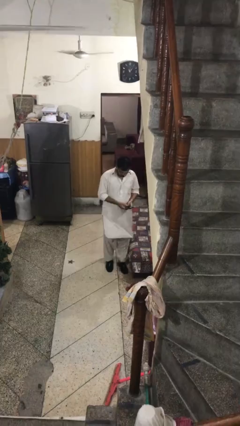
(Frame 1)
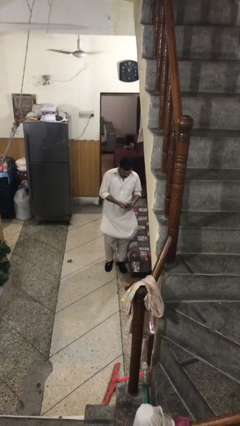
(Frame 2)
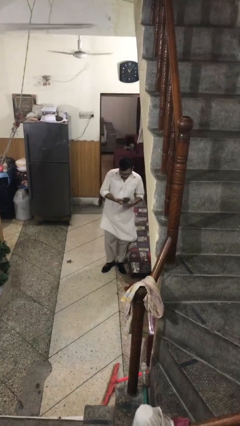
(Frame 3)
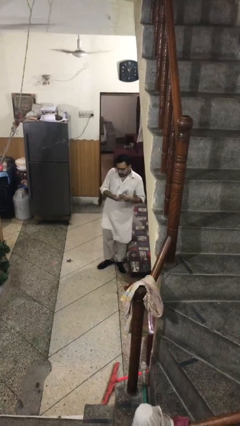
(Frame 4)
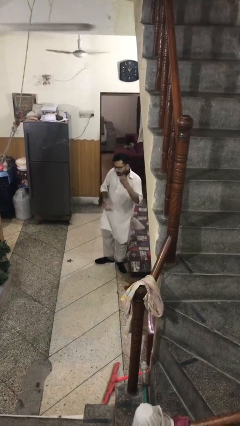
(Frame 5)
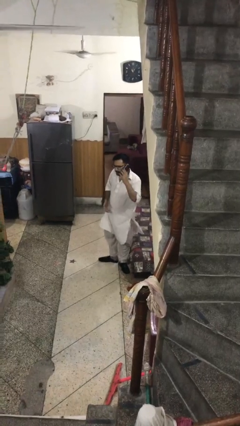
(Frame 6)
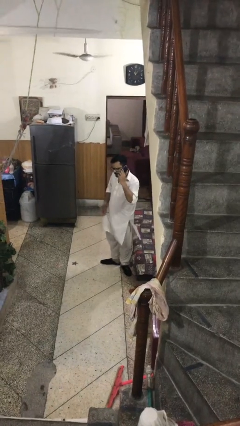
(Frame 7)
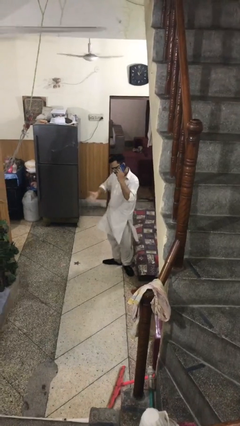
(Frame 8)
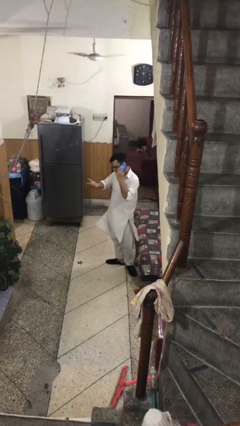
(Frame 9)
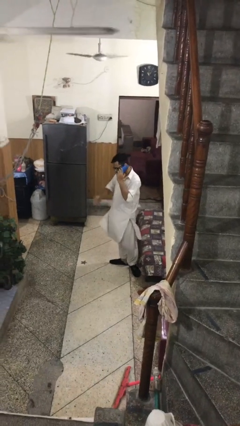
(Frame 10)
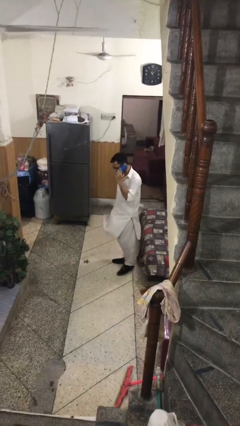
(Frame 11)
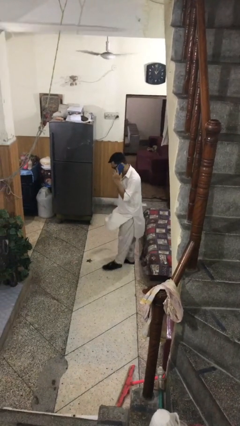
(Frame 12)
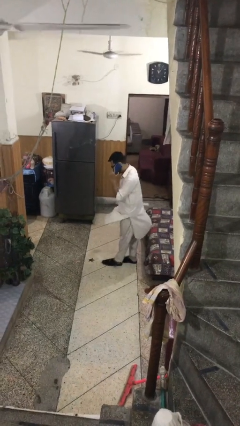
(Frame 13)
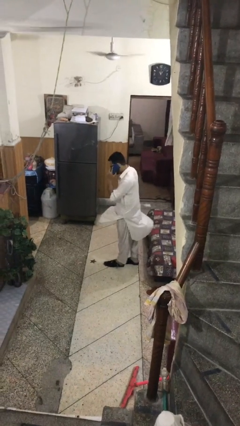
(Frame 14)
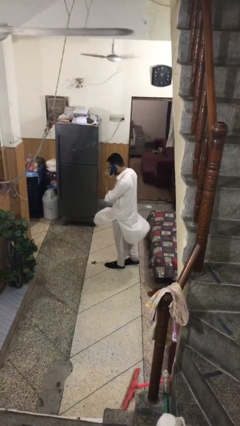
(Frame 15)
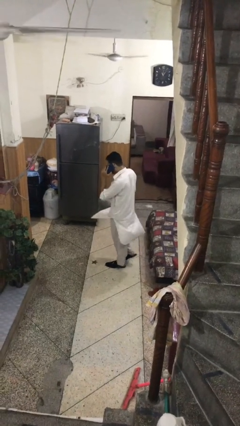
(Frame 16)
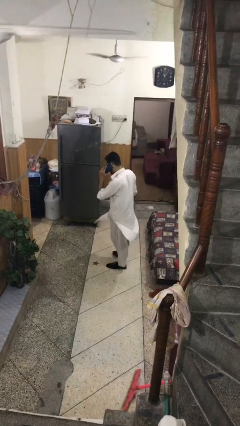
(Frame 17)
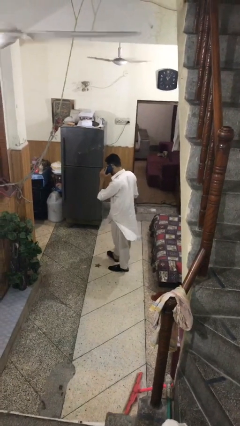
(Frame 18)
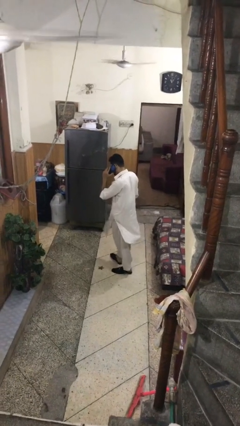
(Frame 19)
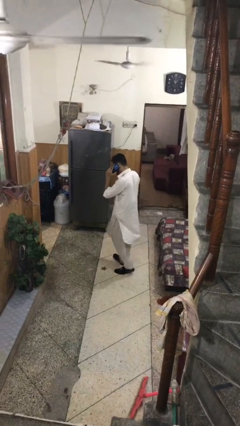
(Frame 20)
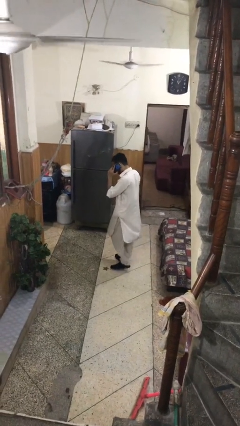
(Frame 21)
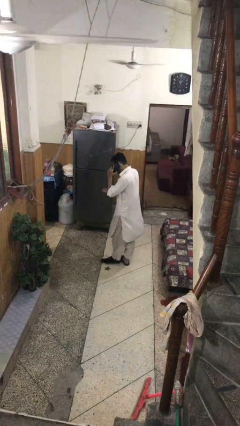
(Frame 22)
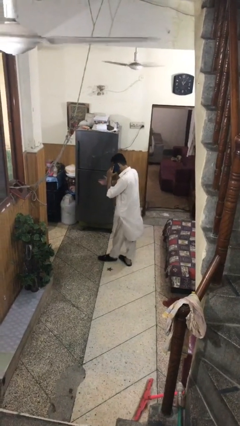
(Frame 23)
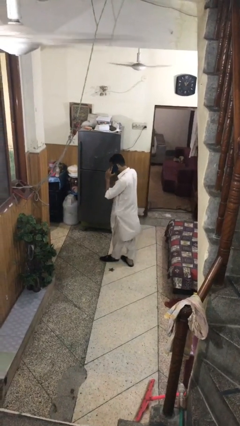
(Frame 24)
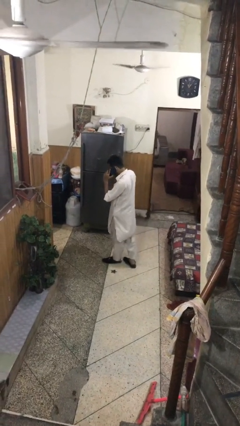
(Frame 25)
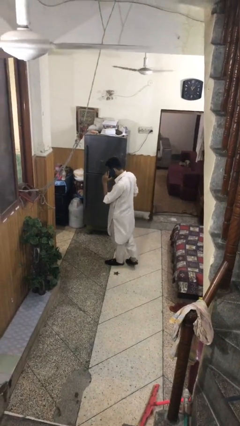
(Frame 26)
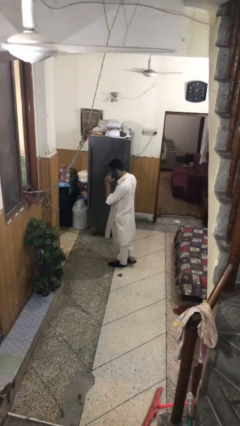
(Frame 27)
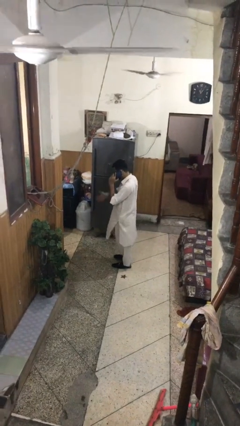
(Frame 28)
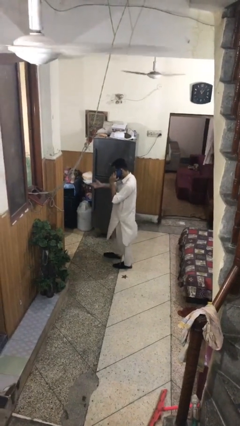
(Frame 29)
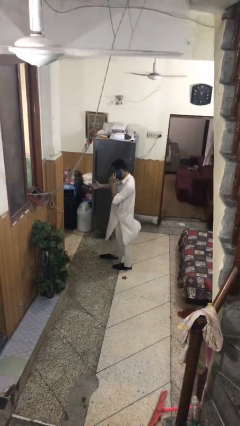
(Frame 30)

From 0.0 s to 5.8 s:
person talks on phone

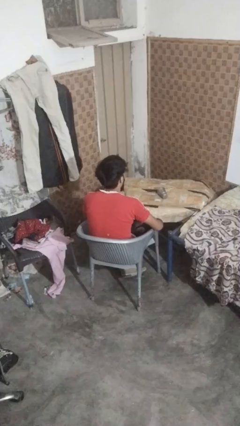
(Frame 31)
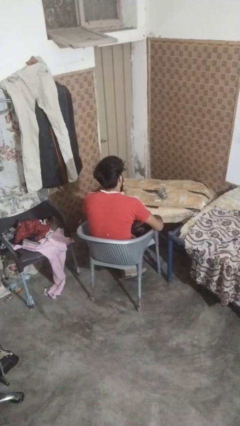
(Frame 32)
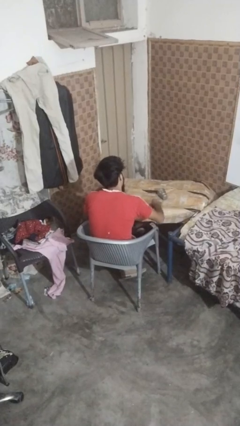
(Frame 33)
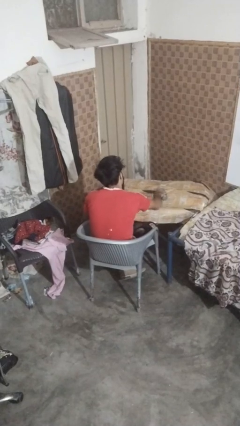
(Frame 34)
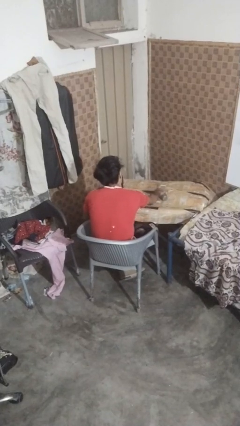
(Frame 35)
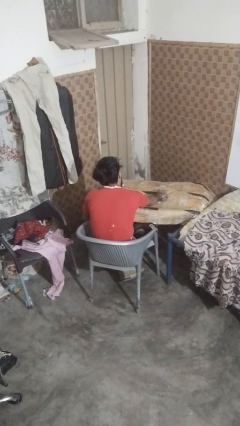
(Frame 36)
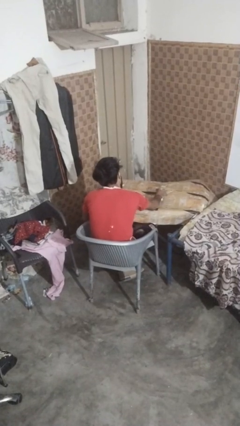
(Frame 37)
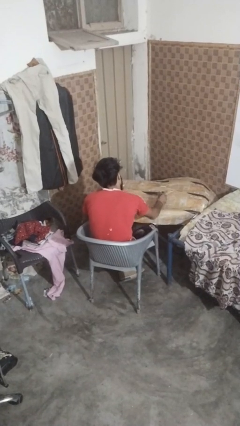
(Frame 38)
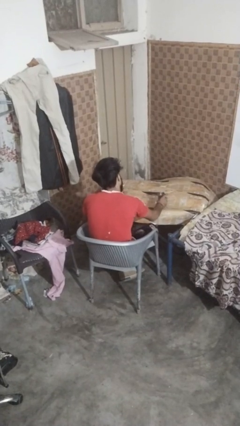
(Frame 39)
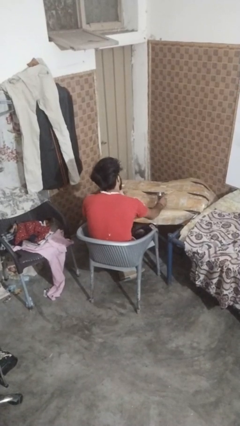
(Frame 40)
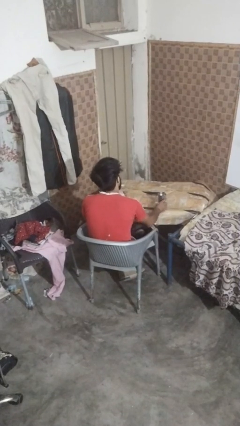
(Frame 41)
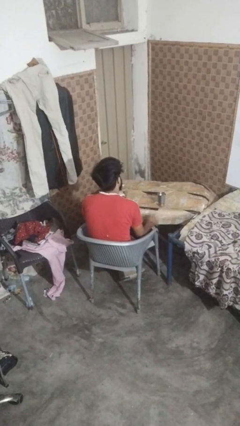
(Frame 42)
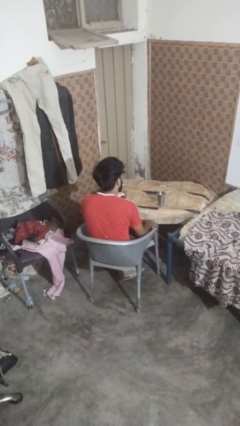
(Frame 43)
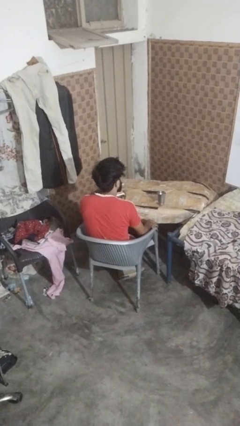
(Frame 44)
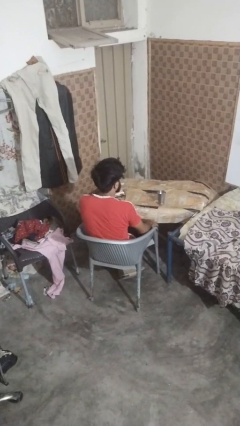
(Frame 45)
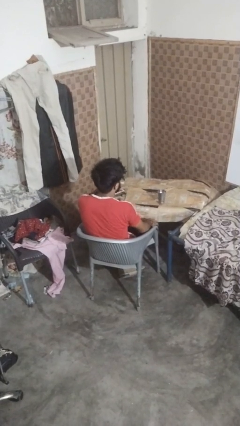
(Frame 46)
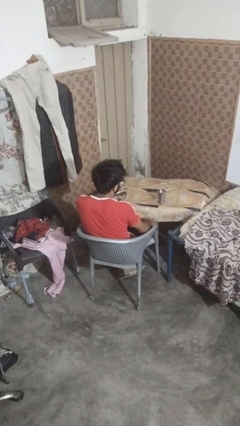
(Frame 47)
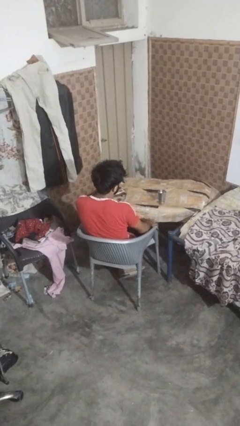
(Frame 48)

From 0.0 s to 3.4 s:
person sets upright glass

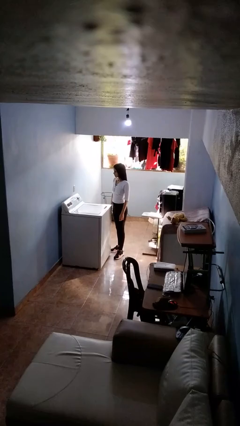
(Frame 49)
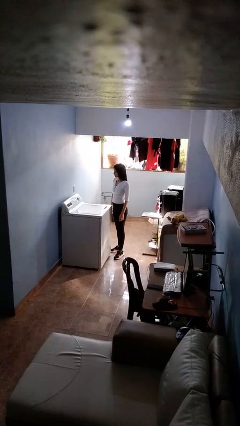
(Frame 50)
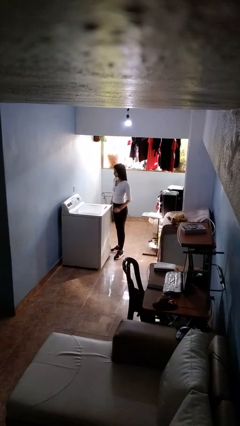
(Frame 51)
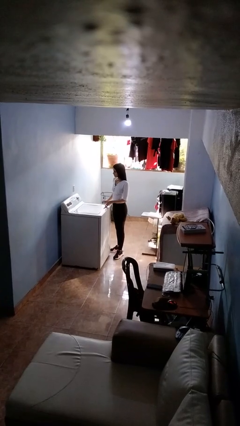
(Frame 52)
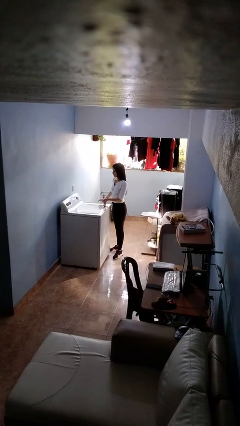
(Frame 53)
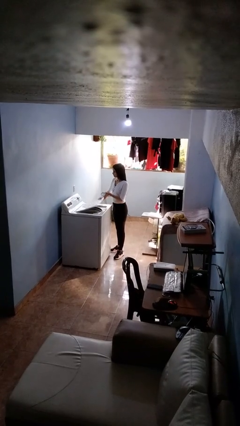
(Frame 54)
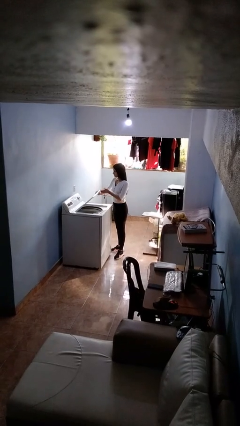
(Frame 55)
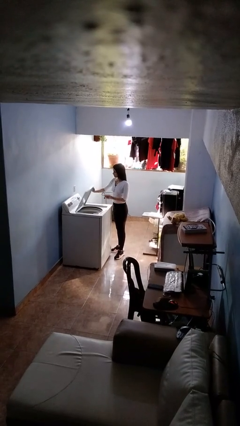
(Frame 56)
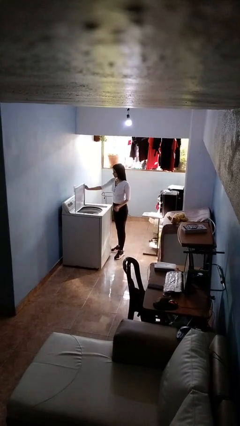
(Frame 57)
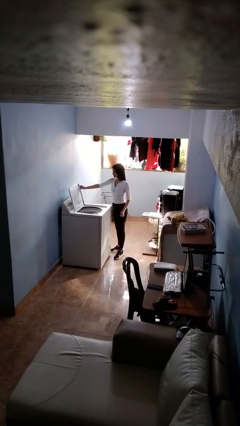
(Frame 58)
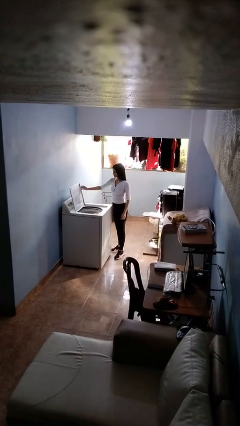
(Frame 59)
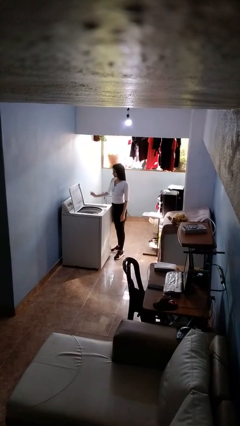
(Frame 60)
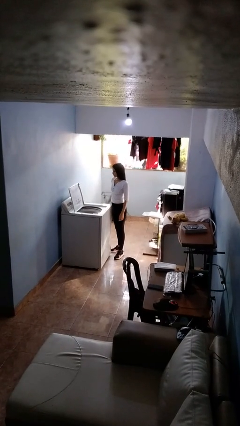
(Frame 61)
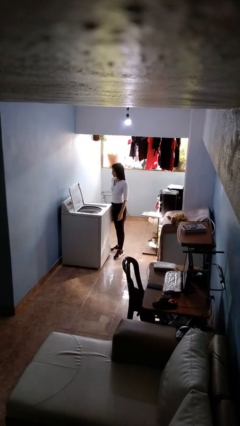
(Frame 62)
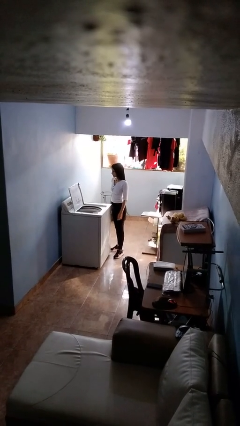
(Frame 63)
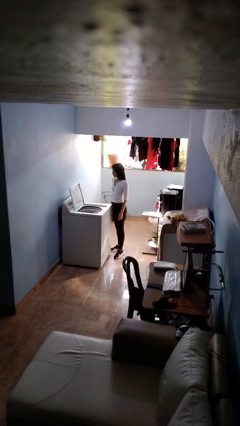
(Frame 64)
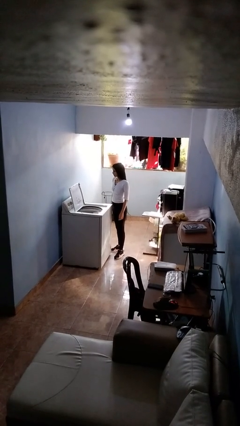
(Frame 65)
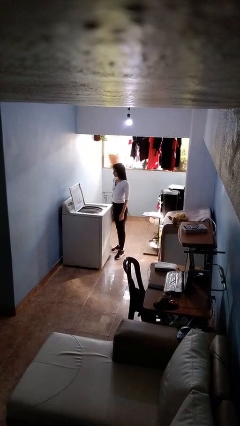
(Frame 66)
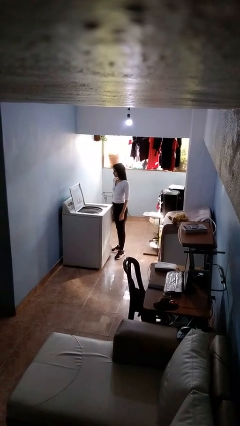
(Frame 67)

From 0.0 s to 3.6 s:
person opens clothes washer

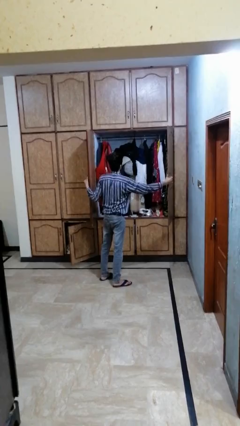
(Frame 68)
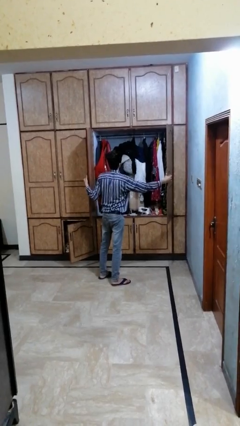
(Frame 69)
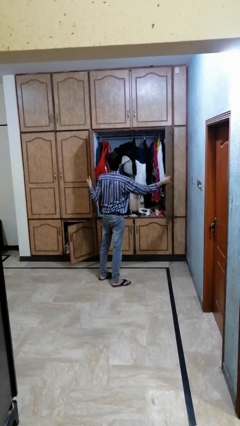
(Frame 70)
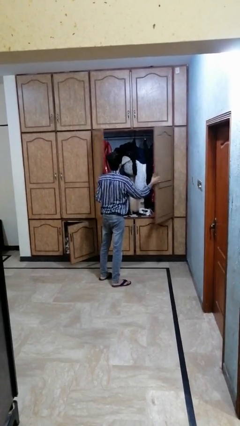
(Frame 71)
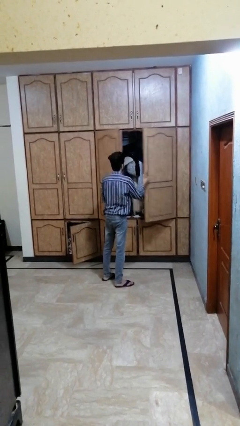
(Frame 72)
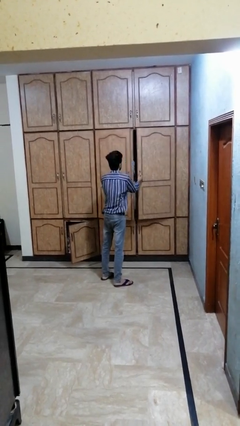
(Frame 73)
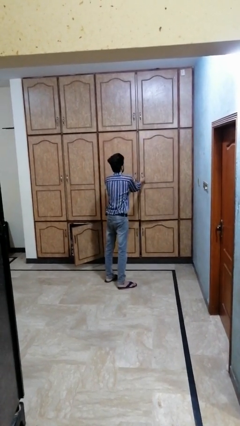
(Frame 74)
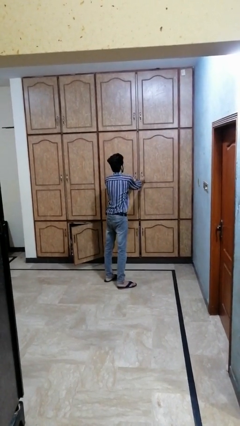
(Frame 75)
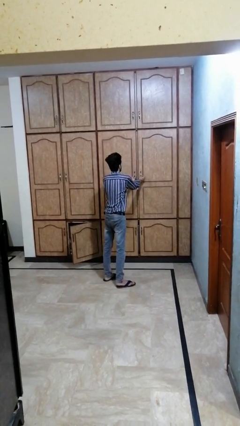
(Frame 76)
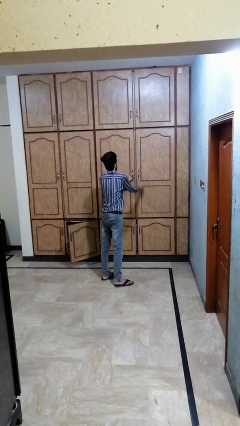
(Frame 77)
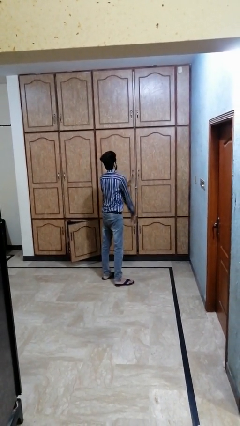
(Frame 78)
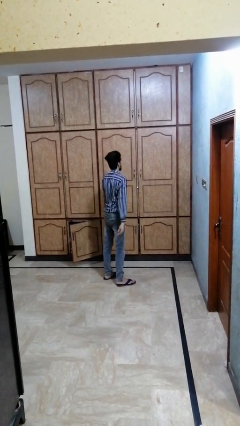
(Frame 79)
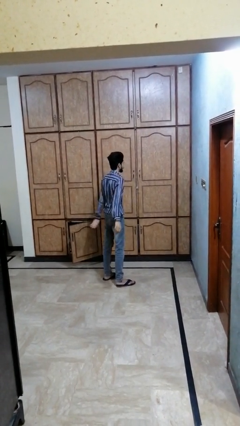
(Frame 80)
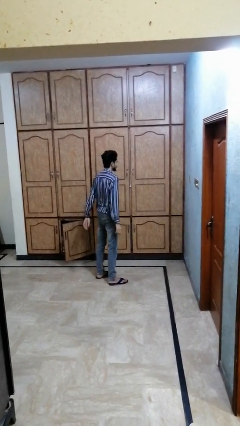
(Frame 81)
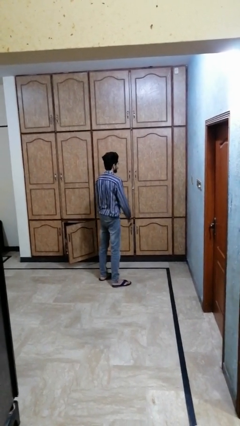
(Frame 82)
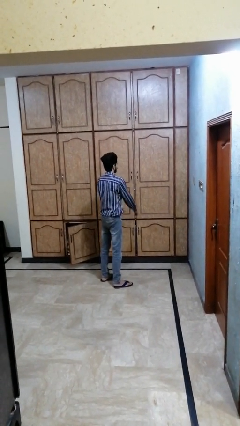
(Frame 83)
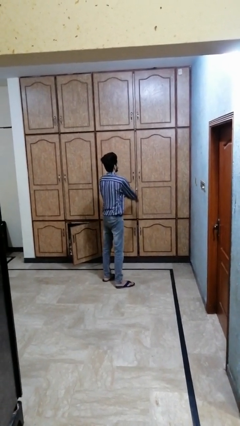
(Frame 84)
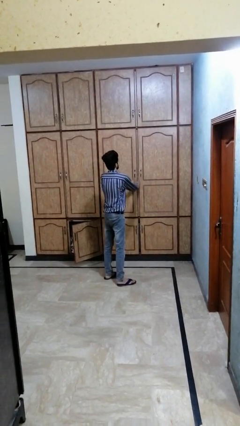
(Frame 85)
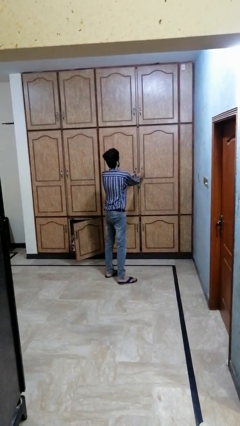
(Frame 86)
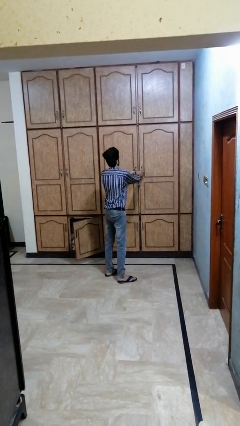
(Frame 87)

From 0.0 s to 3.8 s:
person closes dresser drawer

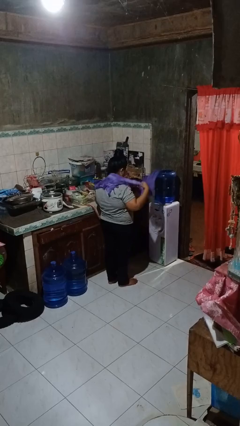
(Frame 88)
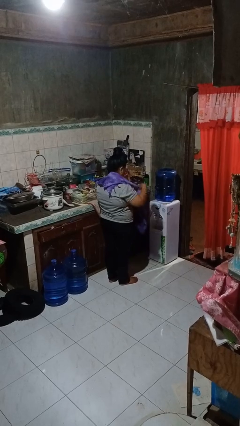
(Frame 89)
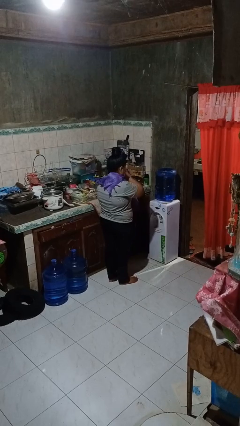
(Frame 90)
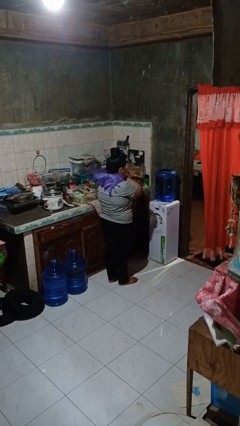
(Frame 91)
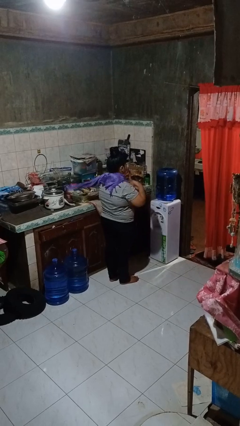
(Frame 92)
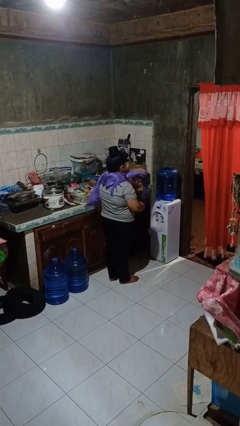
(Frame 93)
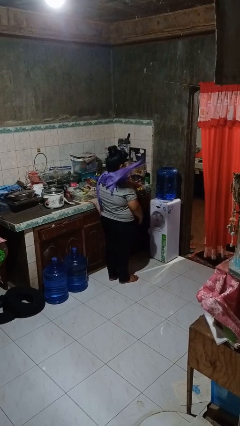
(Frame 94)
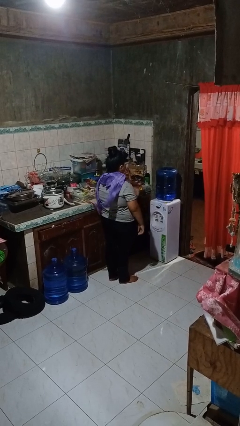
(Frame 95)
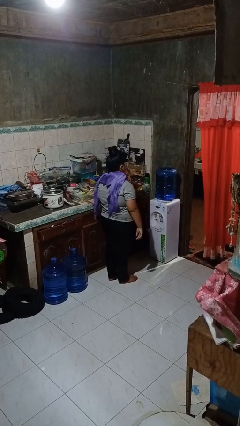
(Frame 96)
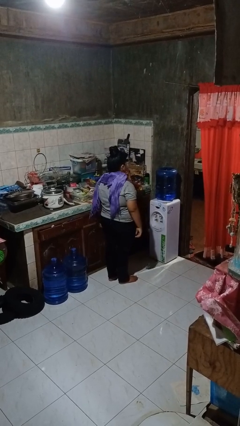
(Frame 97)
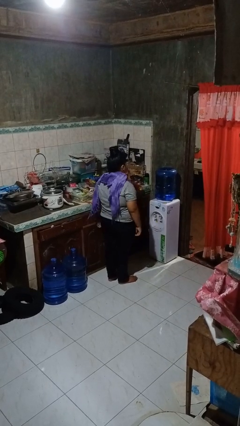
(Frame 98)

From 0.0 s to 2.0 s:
person puts on scarf
